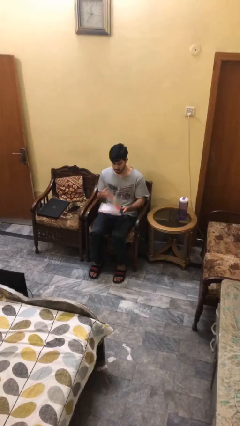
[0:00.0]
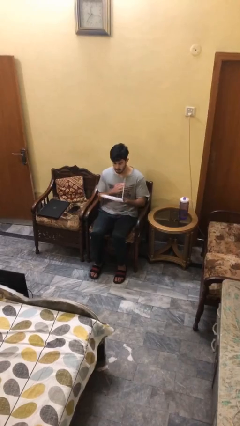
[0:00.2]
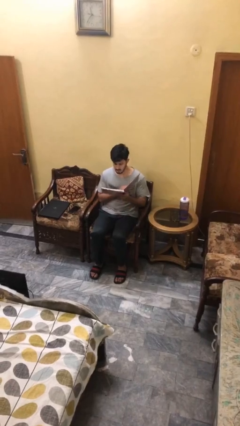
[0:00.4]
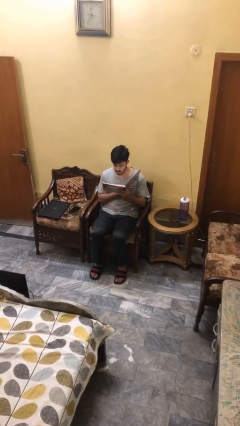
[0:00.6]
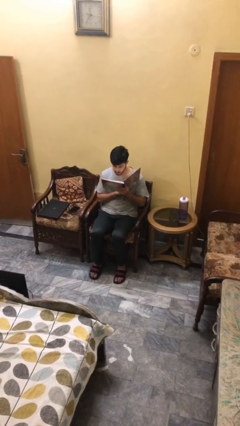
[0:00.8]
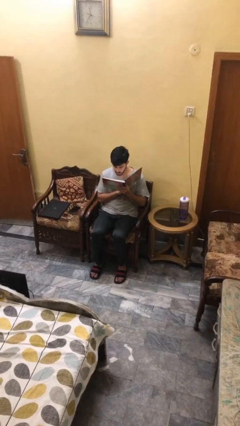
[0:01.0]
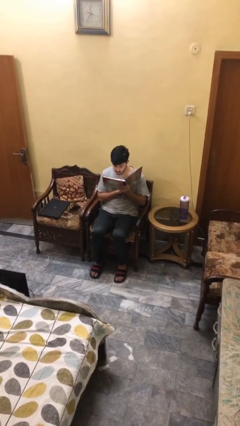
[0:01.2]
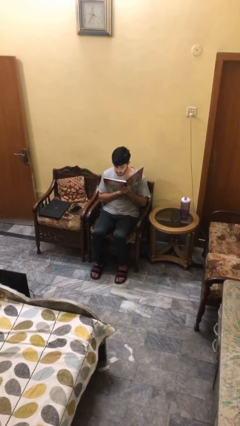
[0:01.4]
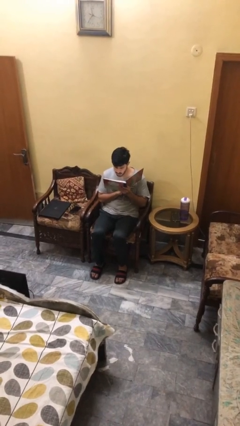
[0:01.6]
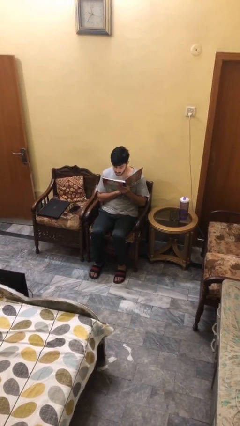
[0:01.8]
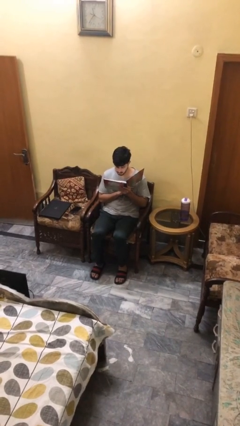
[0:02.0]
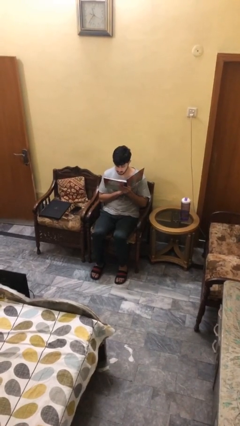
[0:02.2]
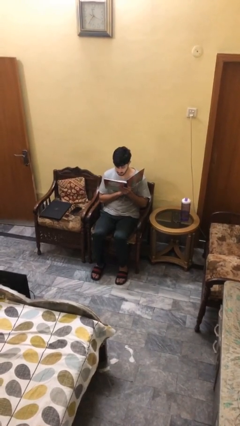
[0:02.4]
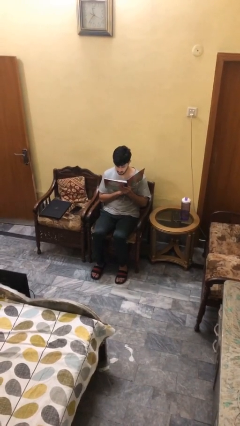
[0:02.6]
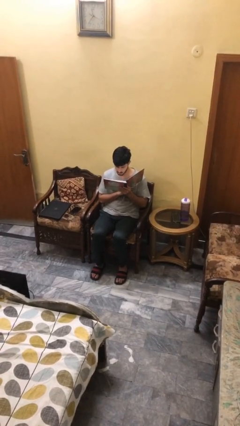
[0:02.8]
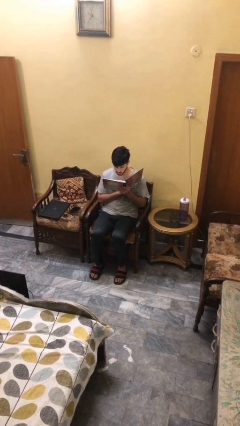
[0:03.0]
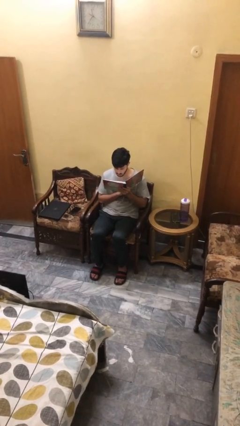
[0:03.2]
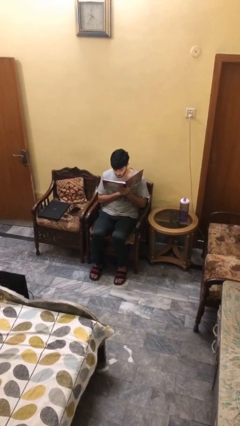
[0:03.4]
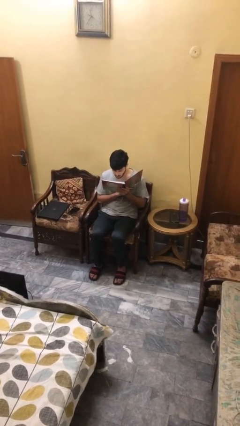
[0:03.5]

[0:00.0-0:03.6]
person reads document

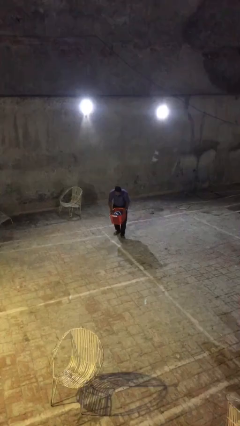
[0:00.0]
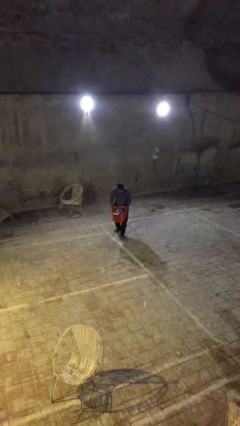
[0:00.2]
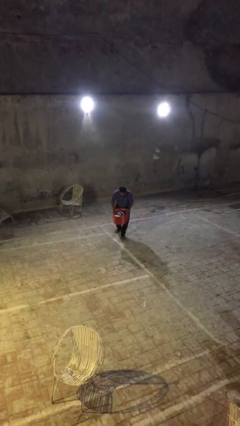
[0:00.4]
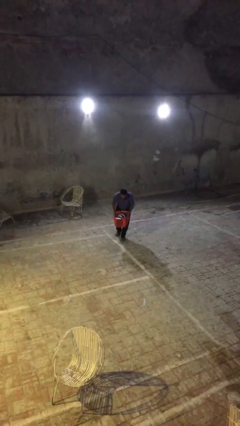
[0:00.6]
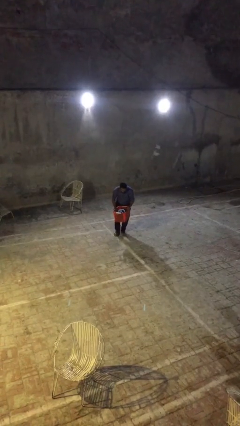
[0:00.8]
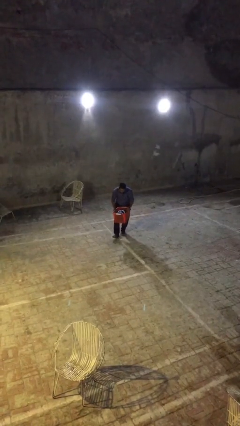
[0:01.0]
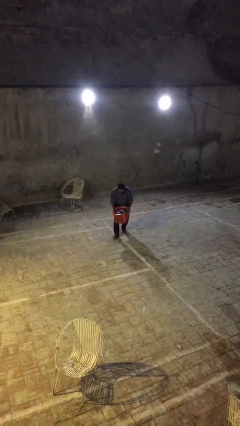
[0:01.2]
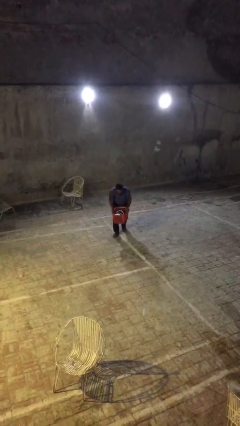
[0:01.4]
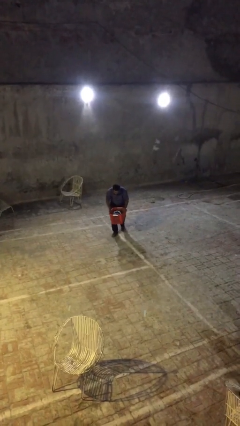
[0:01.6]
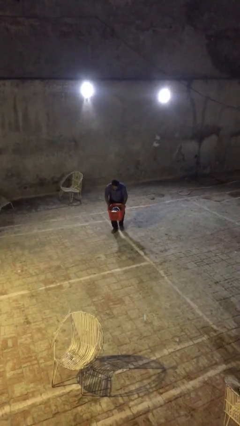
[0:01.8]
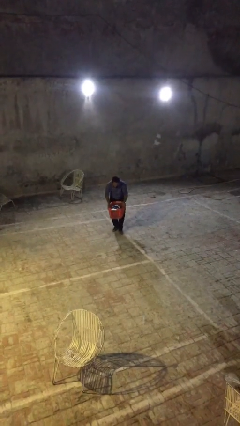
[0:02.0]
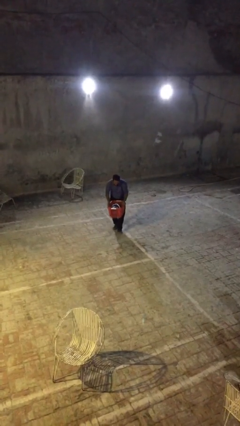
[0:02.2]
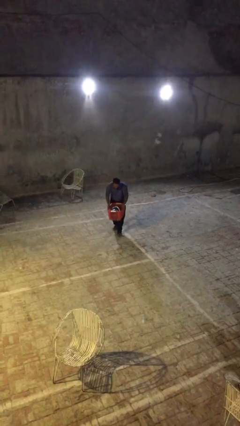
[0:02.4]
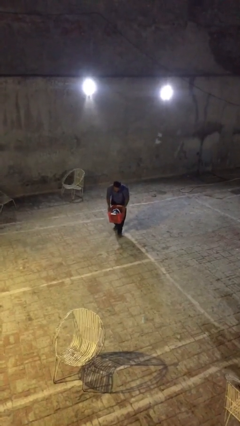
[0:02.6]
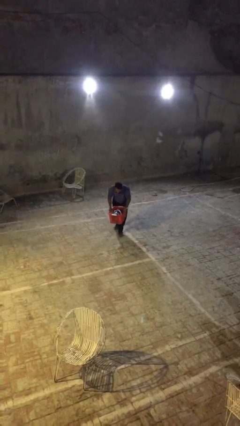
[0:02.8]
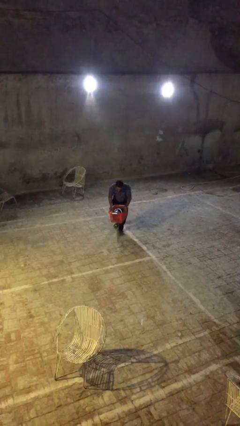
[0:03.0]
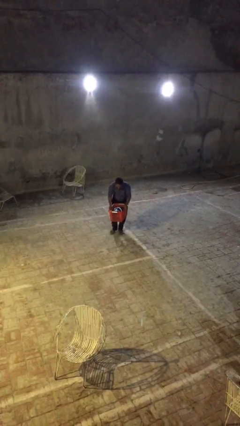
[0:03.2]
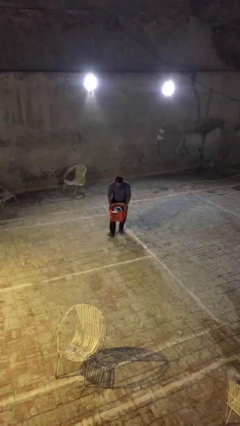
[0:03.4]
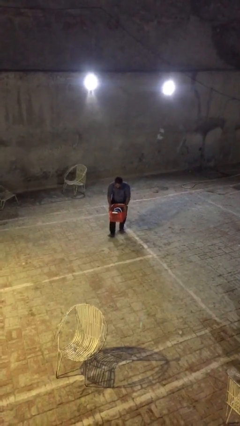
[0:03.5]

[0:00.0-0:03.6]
person carries heavy object

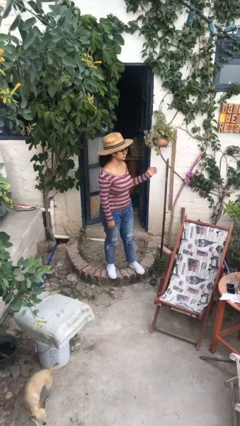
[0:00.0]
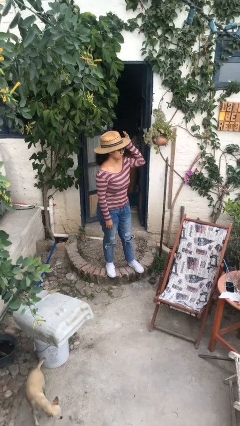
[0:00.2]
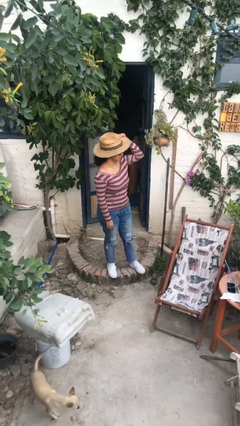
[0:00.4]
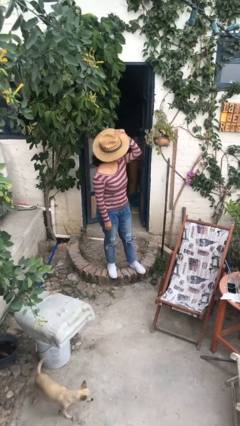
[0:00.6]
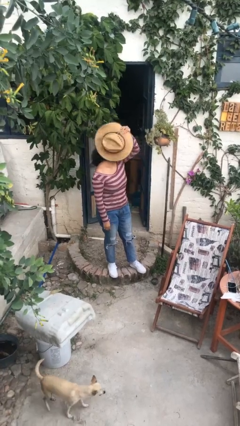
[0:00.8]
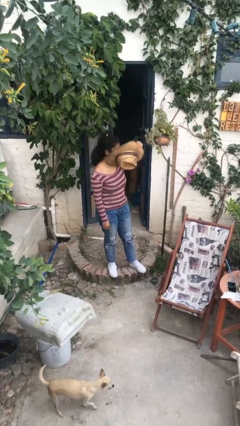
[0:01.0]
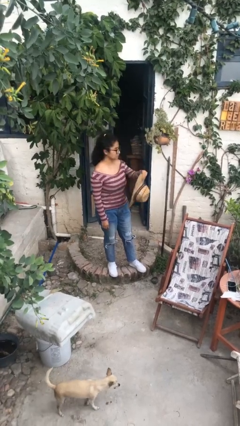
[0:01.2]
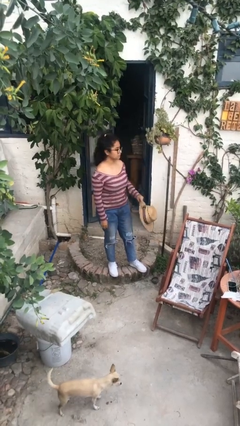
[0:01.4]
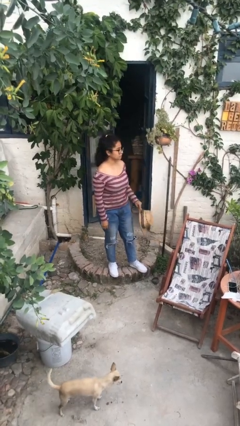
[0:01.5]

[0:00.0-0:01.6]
person takes off hat

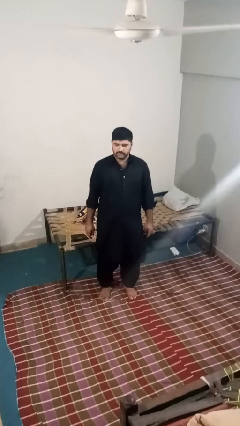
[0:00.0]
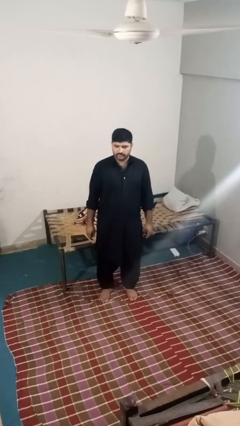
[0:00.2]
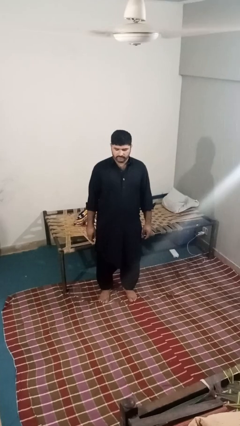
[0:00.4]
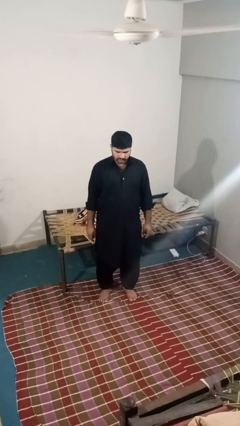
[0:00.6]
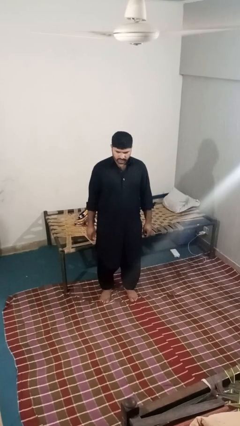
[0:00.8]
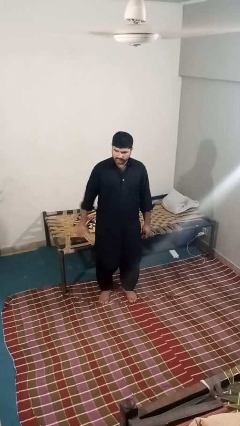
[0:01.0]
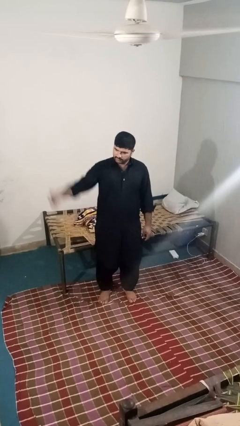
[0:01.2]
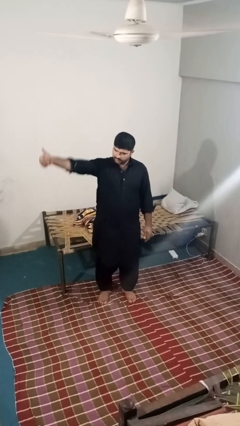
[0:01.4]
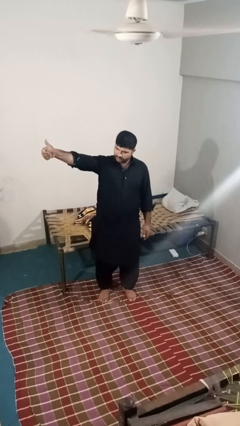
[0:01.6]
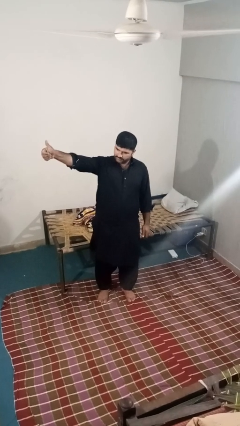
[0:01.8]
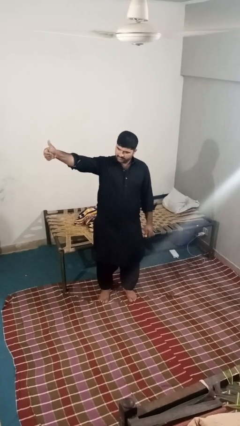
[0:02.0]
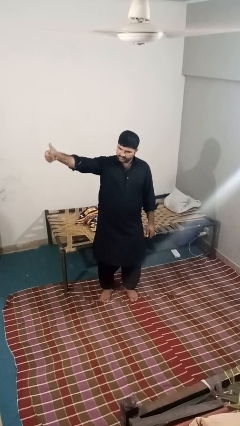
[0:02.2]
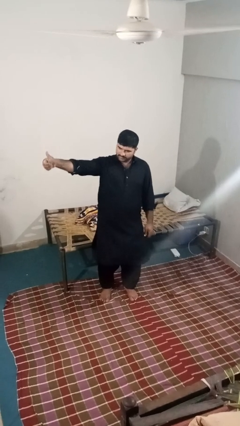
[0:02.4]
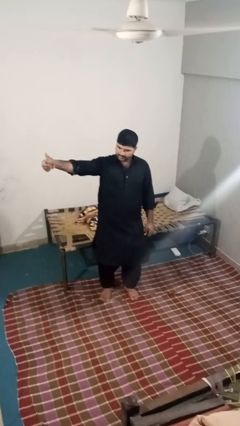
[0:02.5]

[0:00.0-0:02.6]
person gestures thumbs up

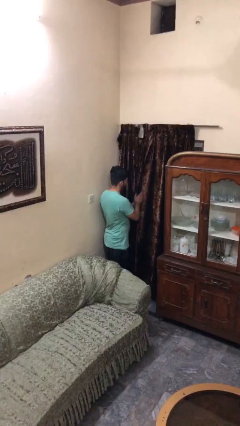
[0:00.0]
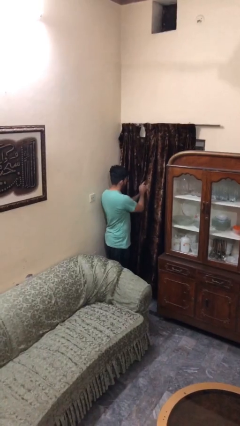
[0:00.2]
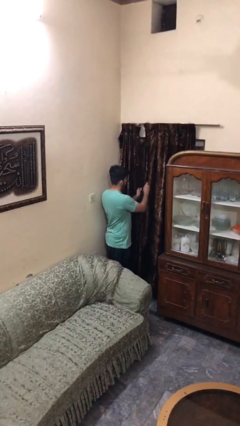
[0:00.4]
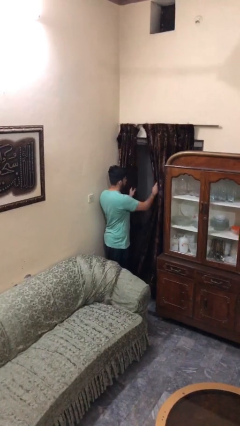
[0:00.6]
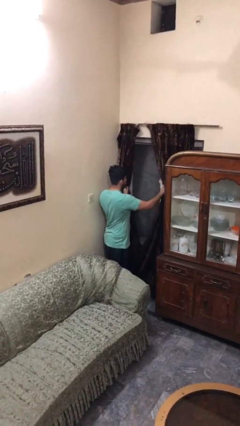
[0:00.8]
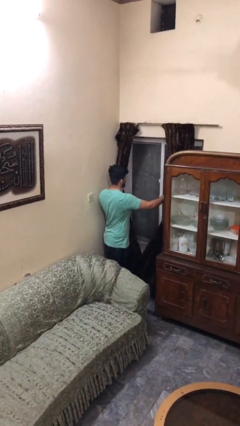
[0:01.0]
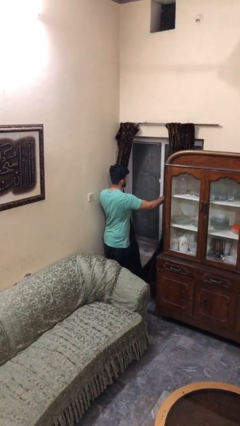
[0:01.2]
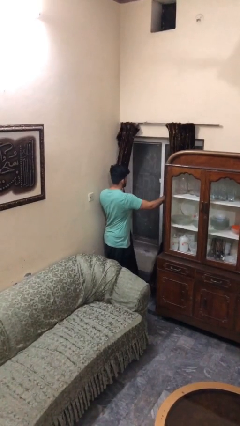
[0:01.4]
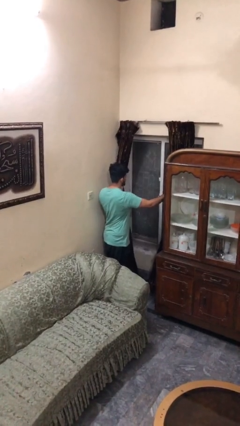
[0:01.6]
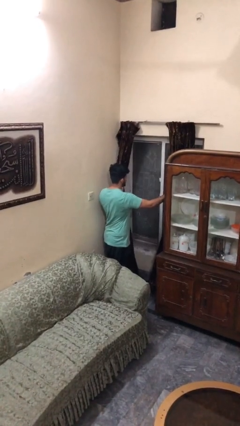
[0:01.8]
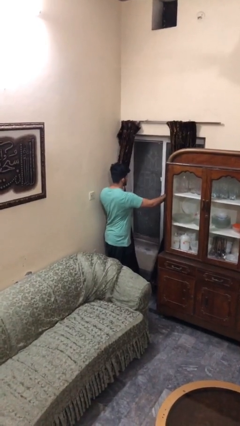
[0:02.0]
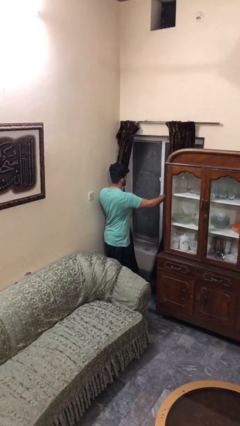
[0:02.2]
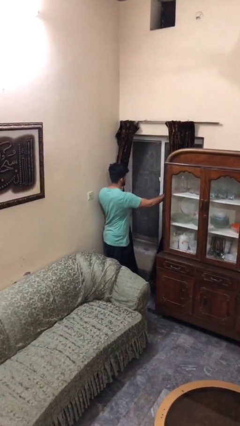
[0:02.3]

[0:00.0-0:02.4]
person opens curtains

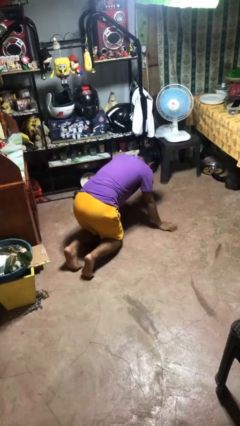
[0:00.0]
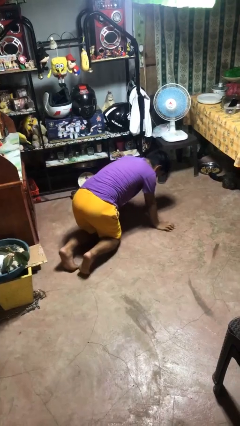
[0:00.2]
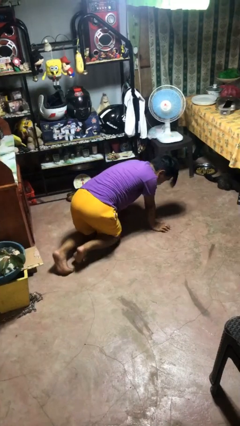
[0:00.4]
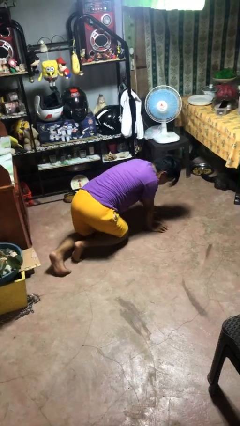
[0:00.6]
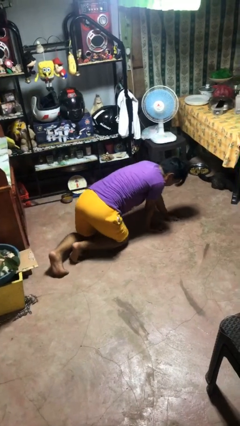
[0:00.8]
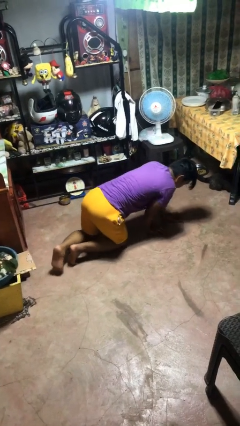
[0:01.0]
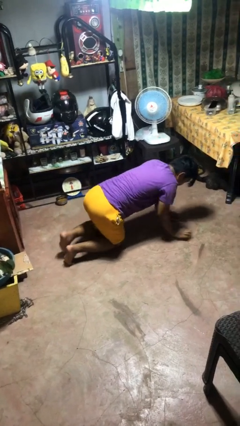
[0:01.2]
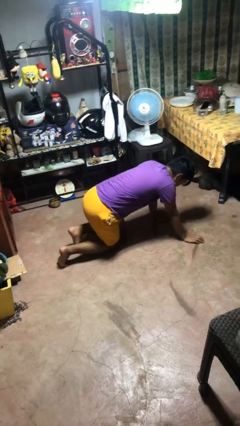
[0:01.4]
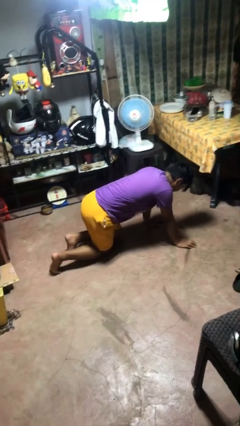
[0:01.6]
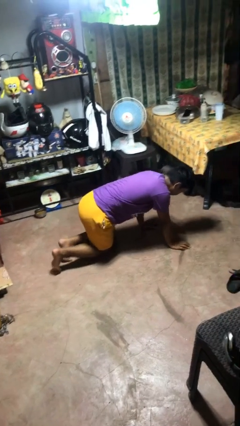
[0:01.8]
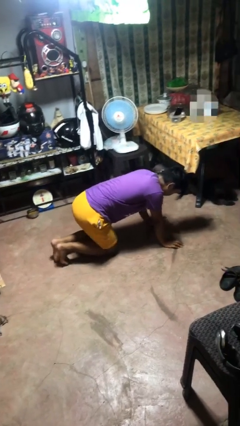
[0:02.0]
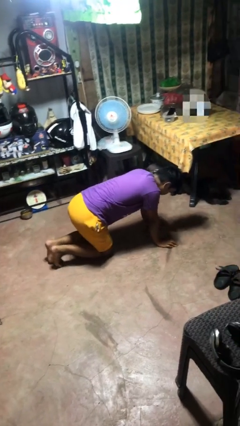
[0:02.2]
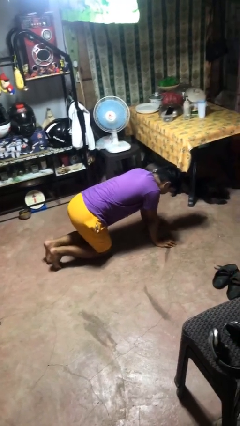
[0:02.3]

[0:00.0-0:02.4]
person crawls

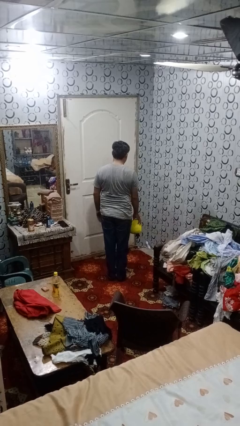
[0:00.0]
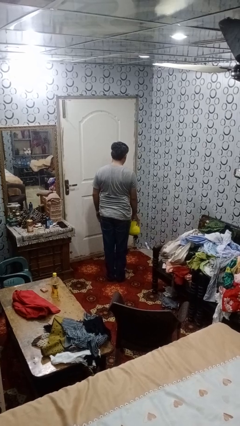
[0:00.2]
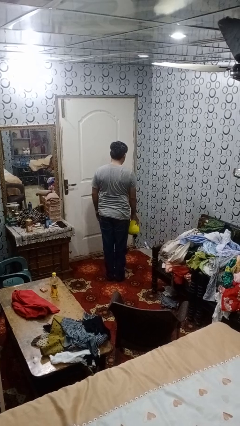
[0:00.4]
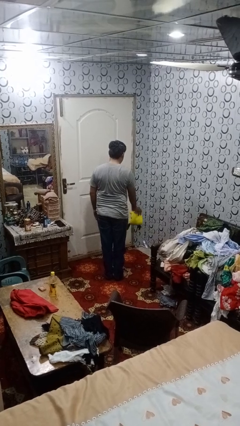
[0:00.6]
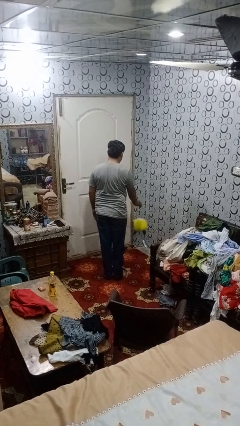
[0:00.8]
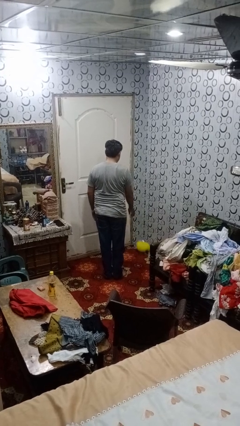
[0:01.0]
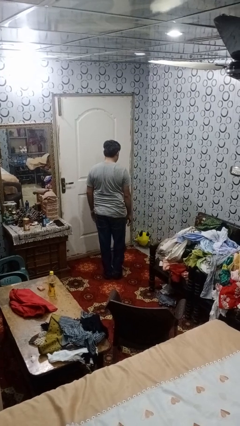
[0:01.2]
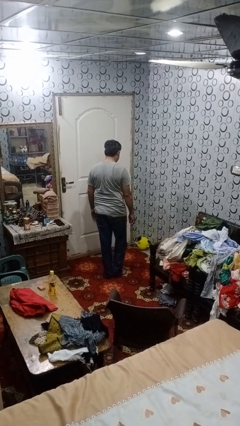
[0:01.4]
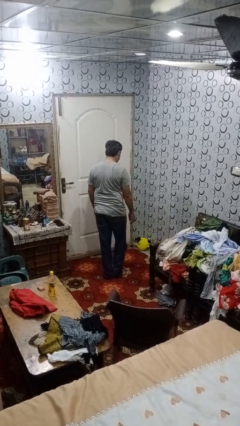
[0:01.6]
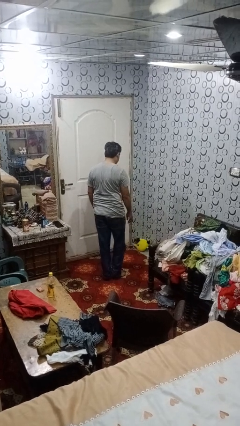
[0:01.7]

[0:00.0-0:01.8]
person throws object to ground
